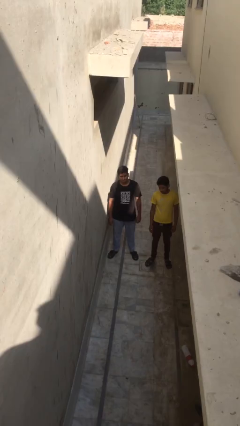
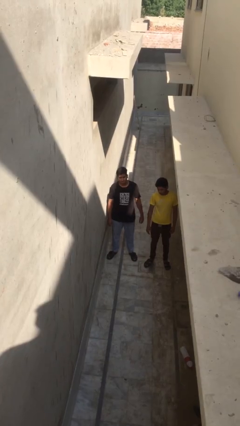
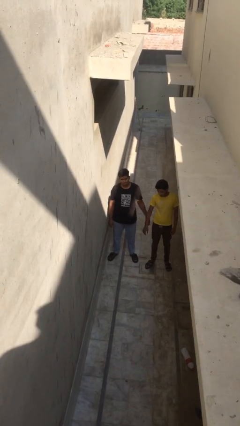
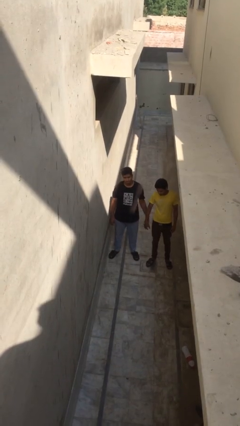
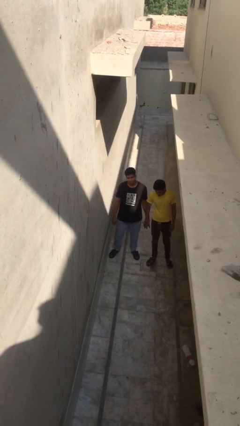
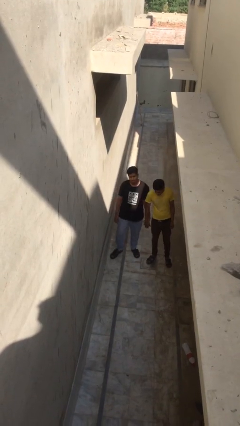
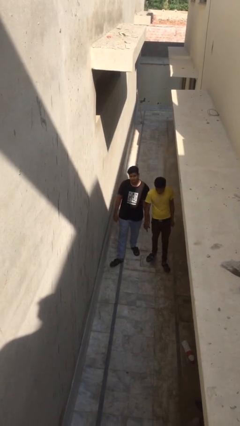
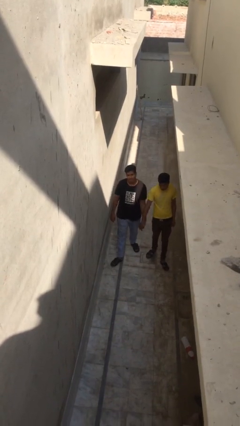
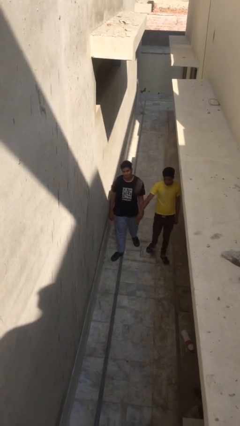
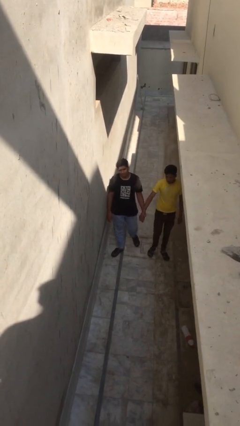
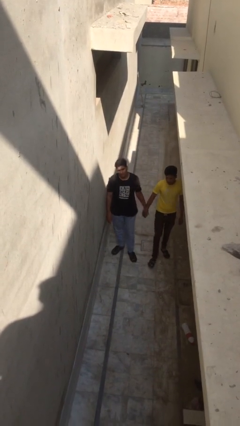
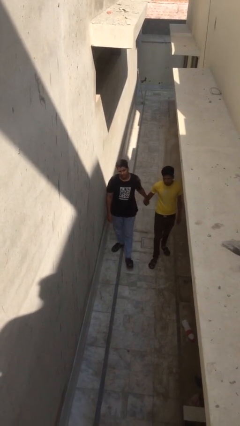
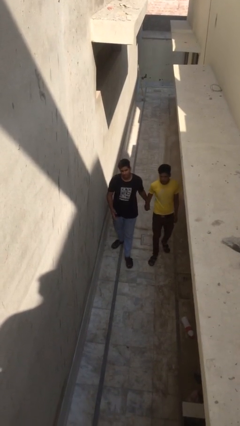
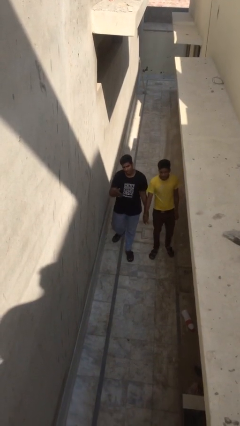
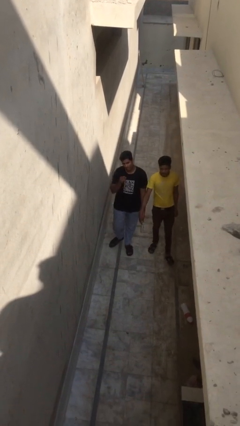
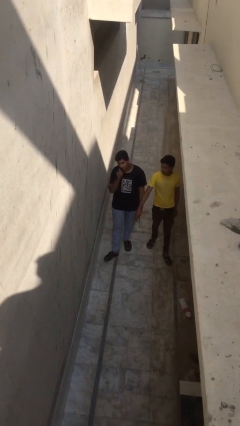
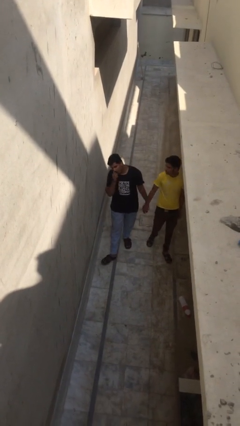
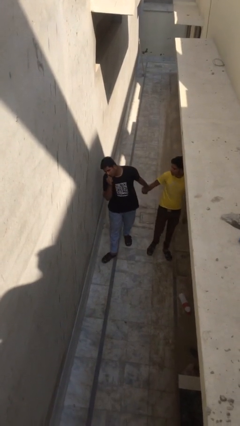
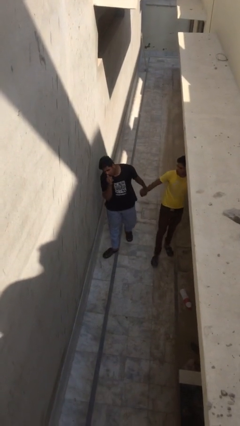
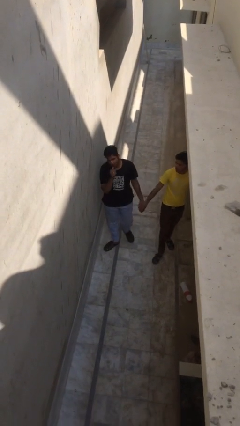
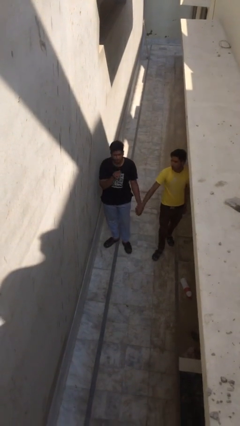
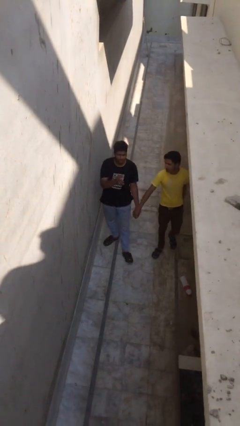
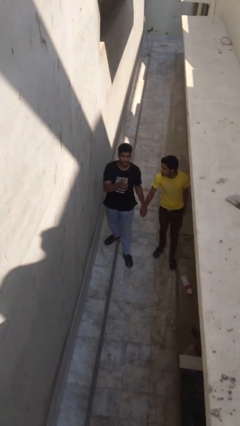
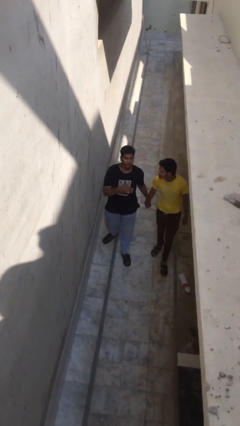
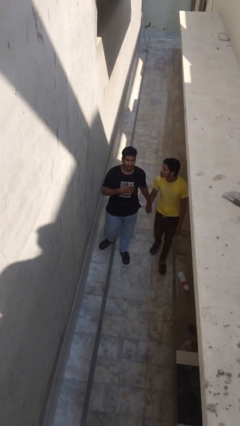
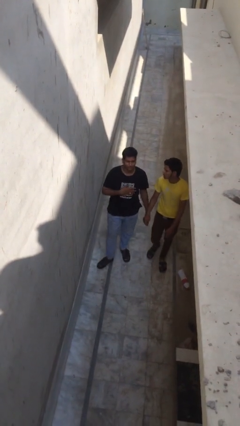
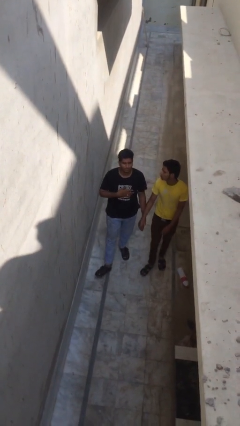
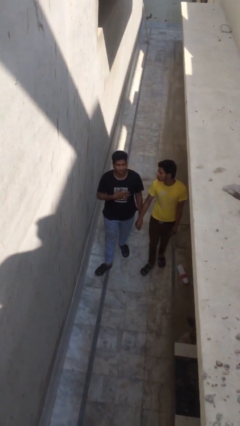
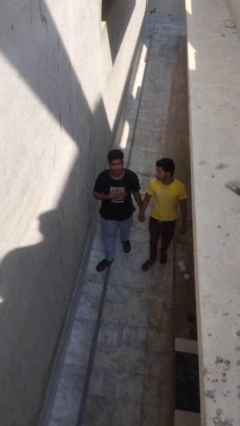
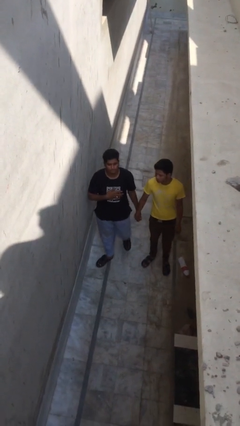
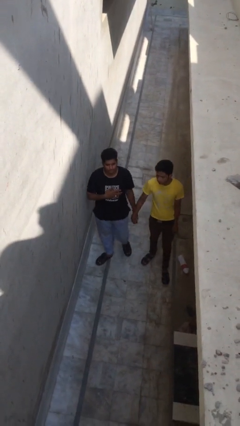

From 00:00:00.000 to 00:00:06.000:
person holds hand

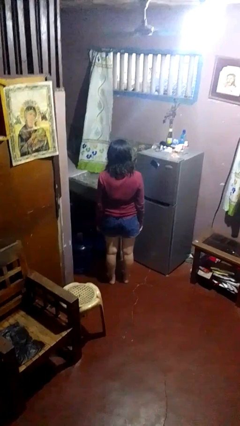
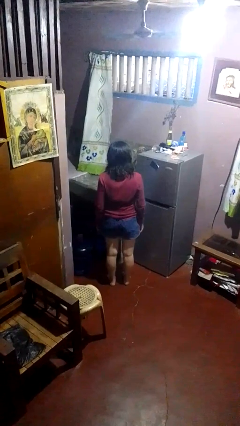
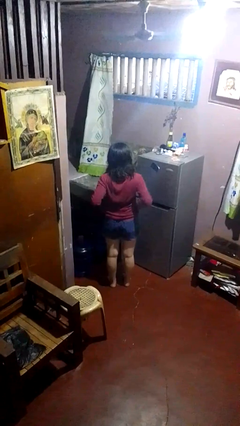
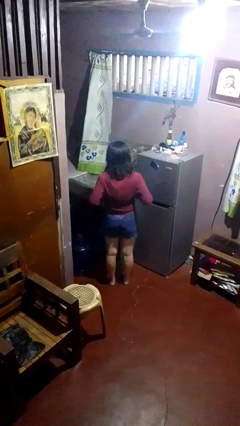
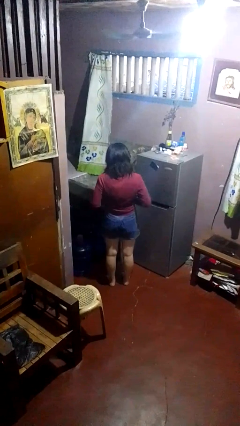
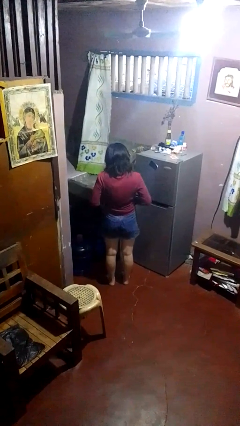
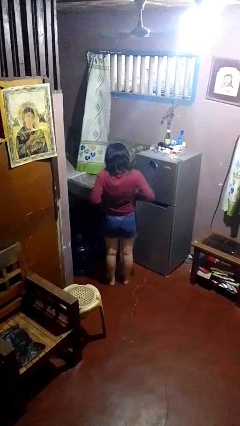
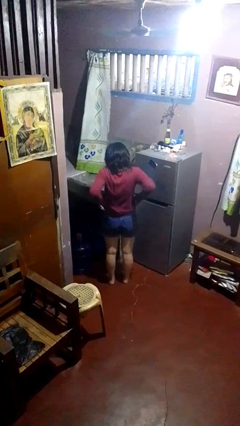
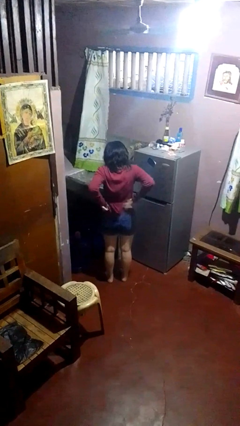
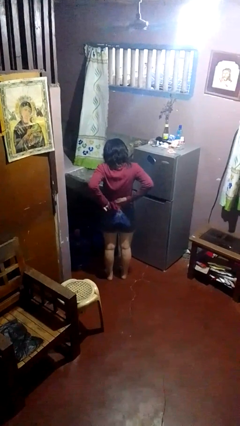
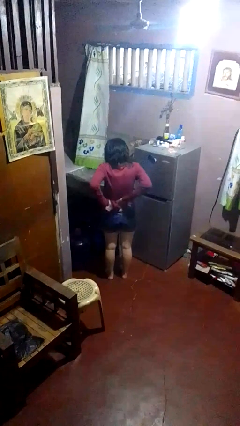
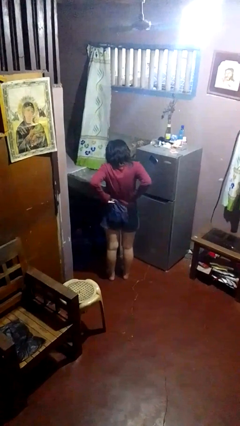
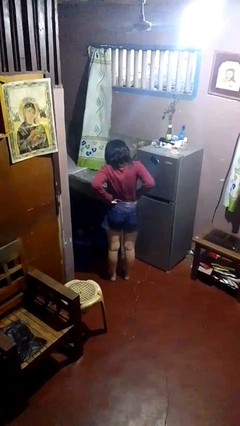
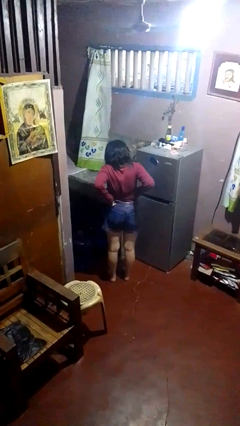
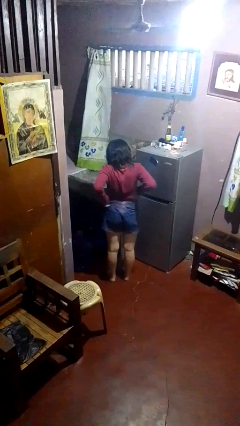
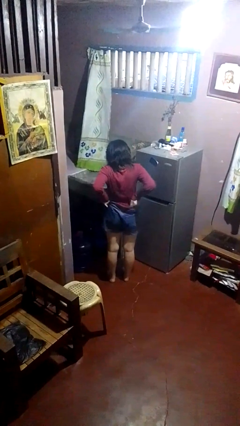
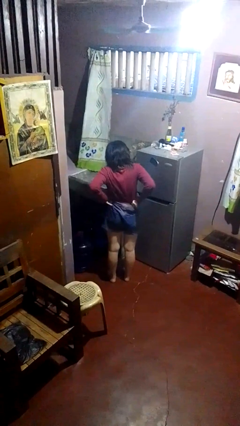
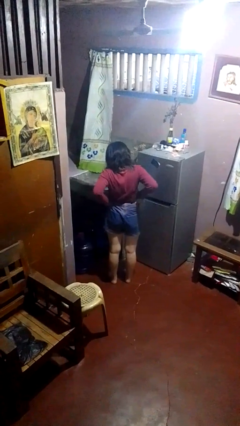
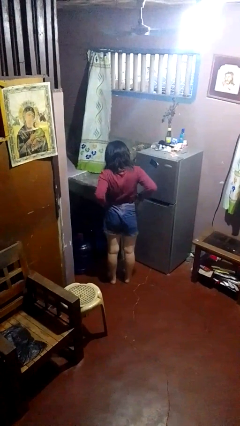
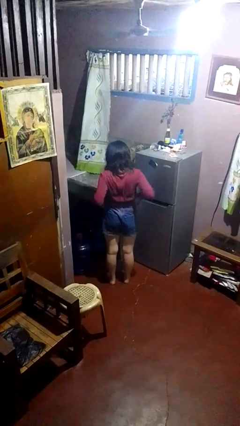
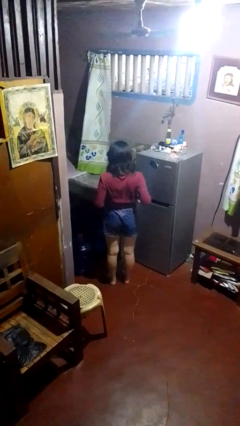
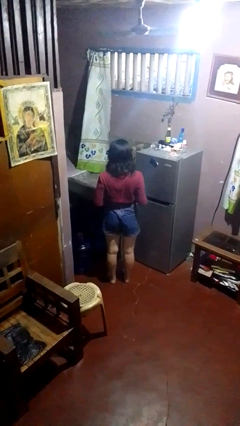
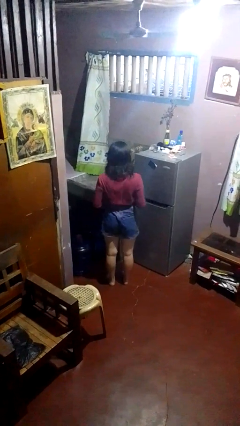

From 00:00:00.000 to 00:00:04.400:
person tucks in shirt

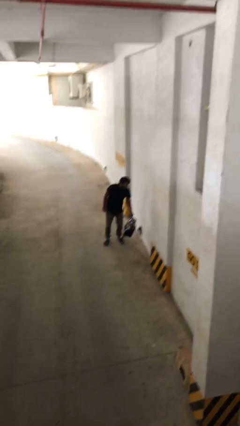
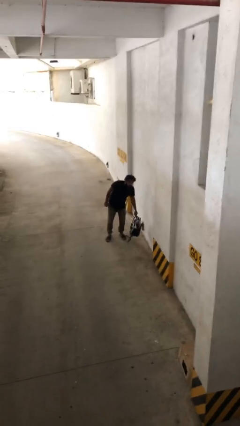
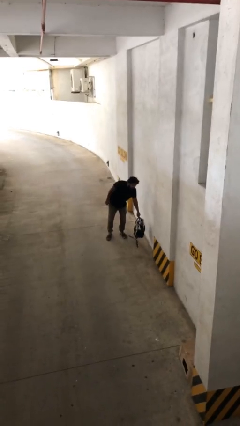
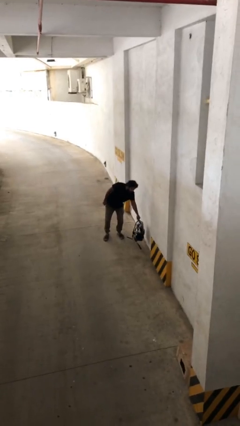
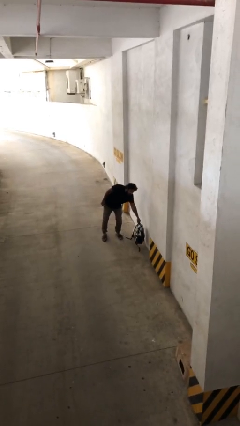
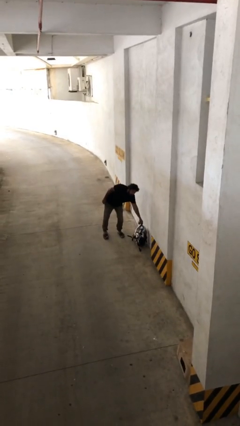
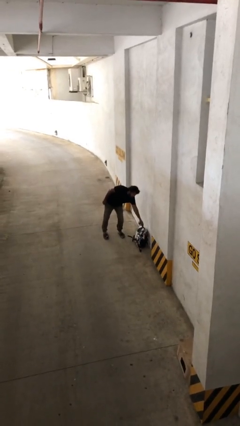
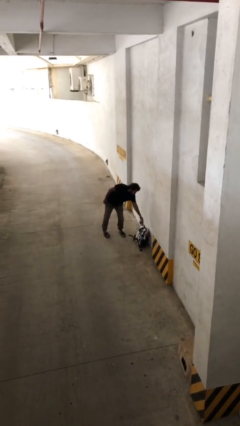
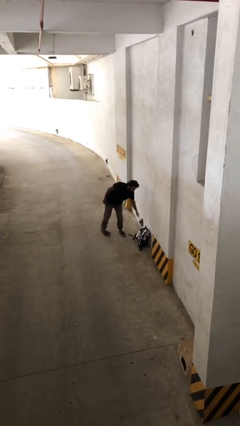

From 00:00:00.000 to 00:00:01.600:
person puts down object on floor

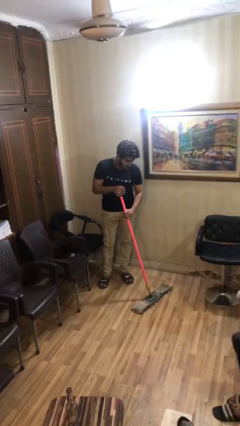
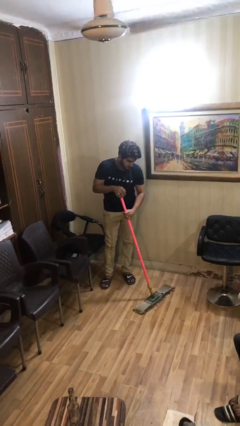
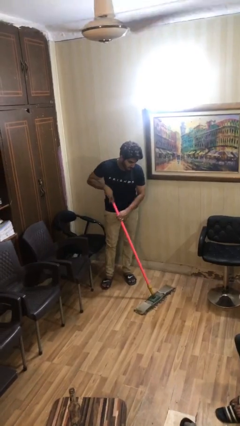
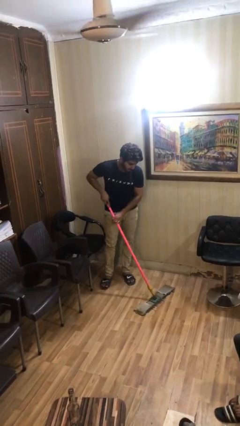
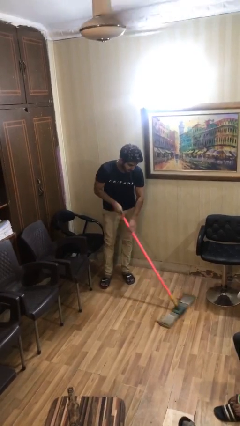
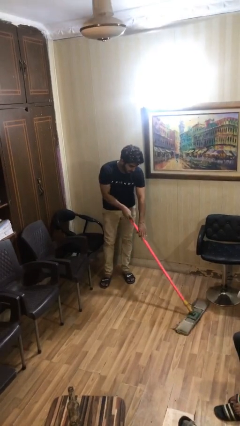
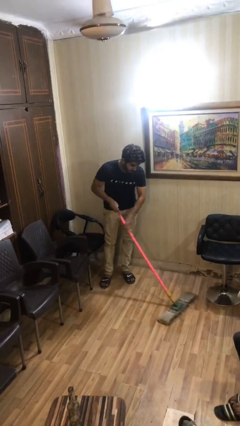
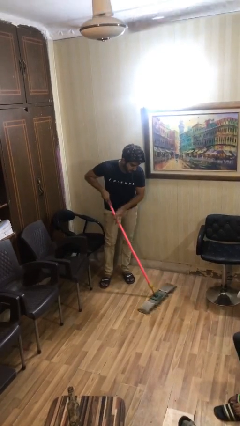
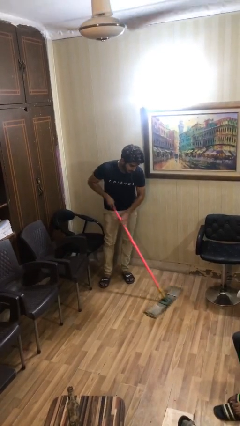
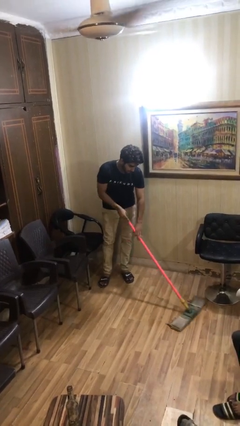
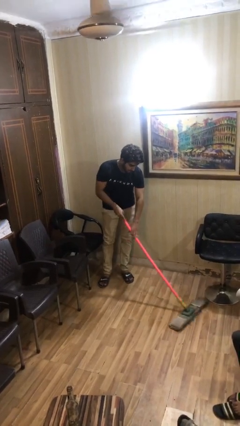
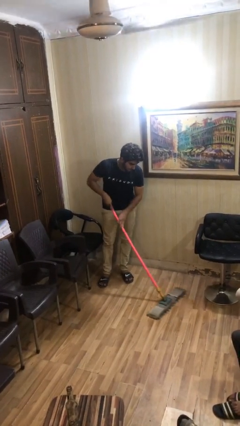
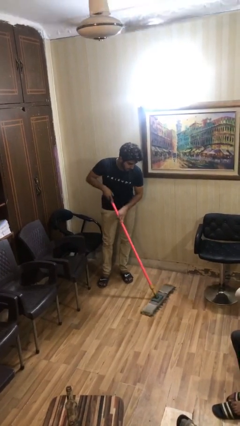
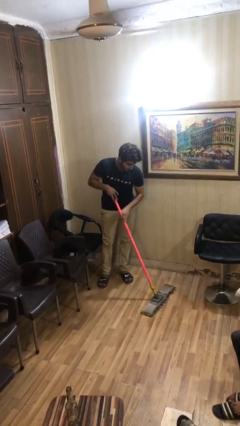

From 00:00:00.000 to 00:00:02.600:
person sweeps floor

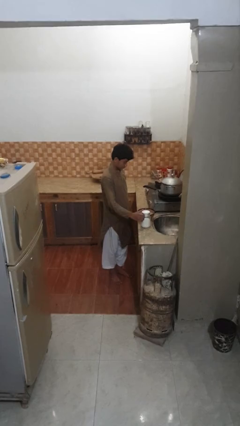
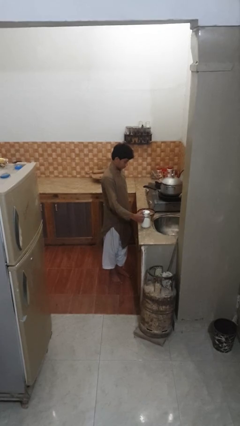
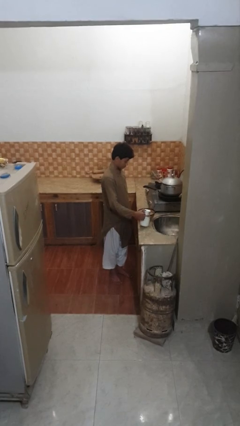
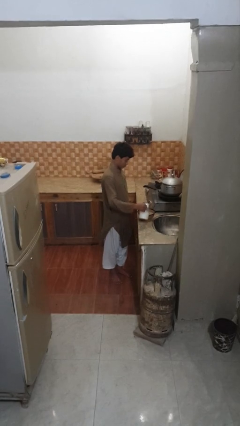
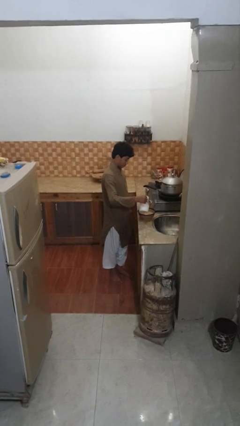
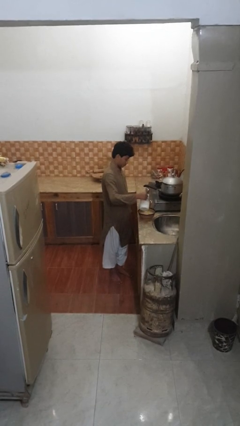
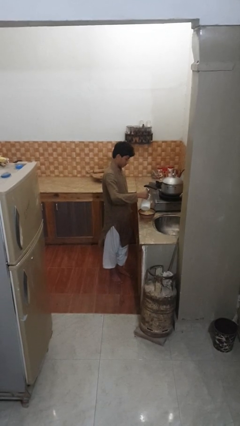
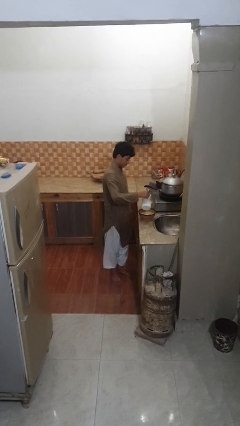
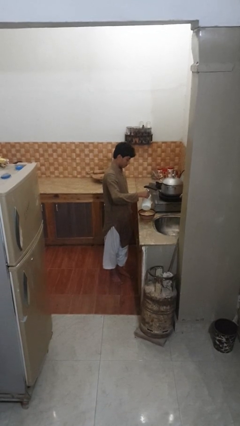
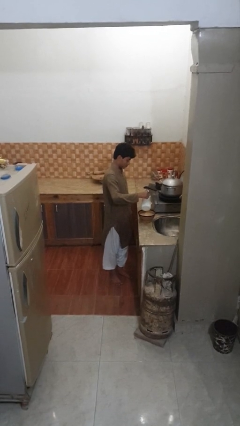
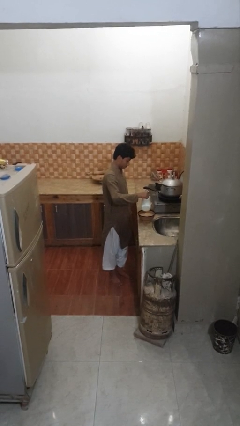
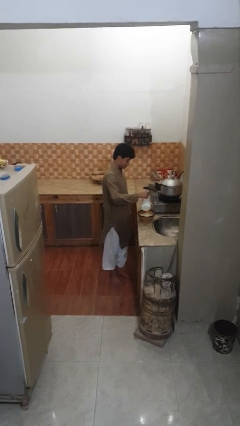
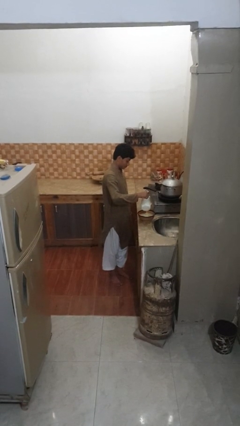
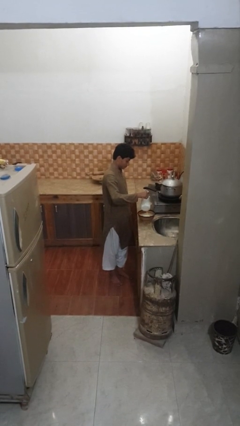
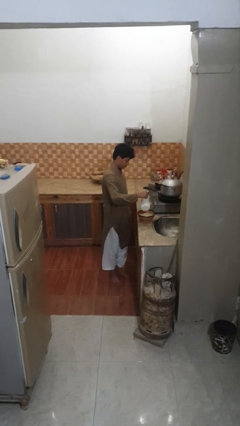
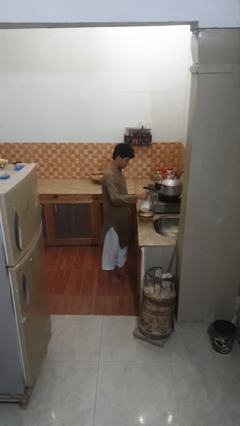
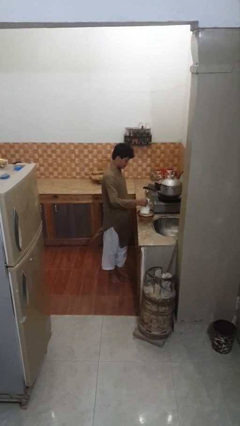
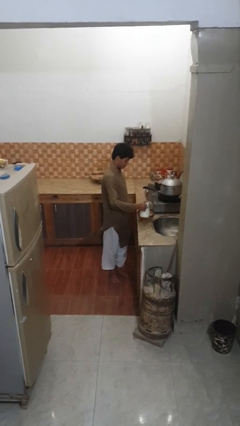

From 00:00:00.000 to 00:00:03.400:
person pours into bowl
